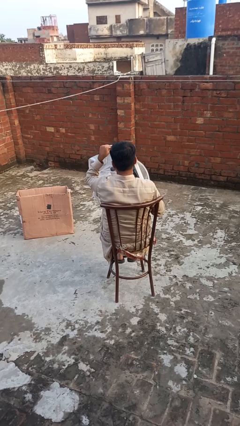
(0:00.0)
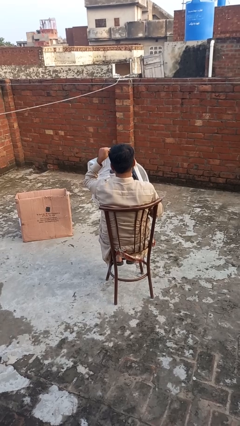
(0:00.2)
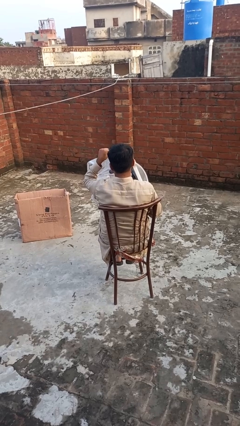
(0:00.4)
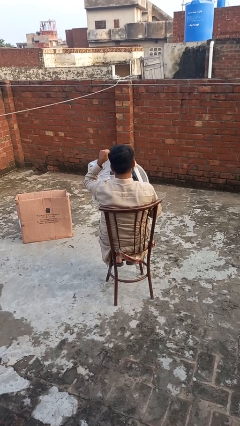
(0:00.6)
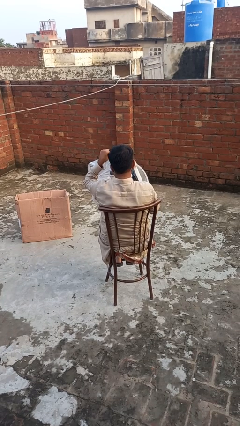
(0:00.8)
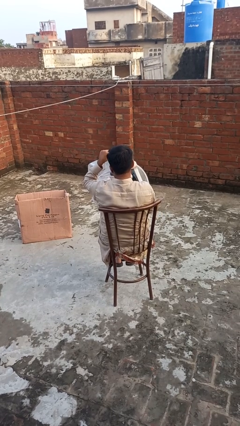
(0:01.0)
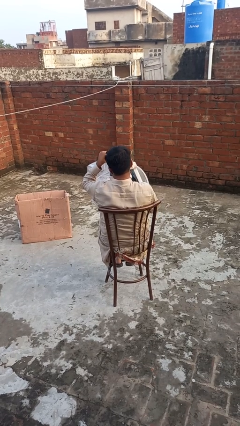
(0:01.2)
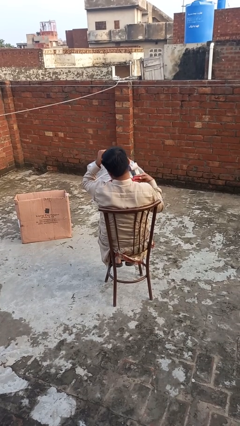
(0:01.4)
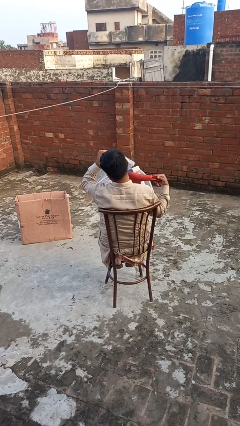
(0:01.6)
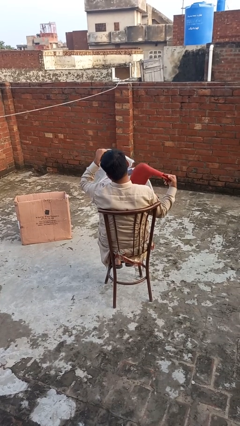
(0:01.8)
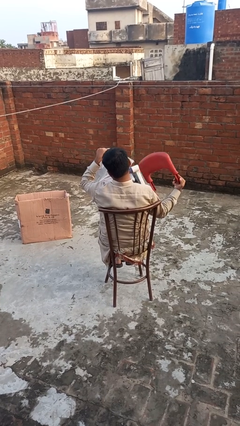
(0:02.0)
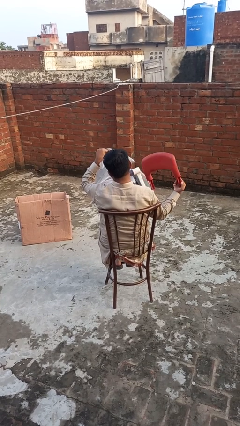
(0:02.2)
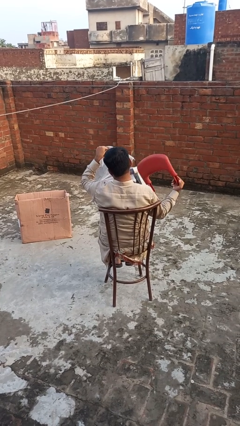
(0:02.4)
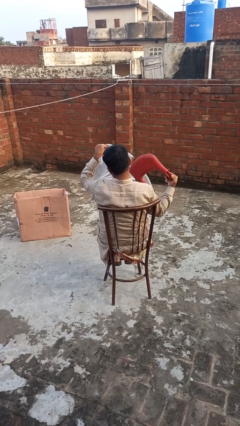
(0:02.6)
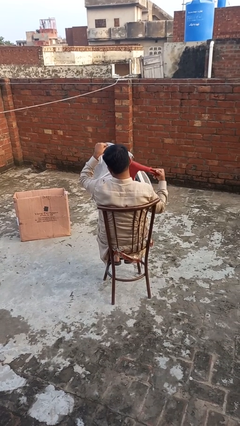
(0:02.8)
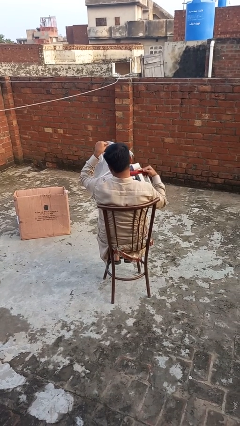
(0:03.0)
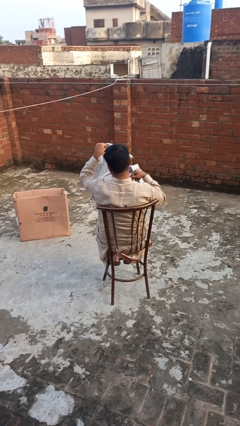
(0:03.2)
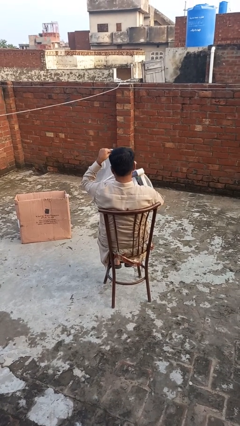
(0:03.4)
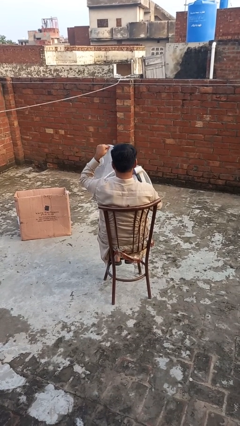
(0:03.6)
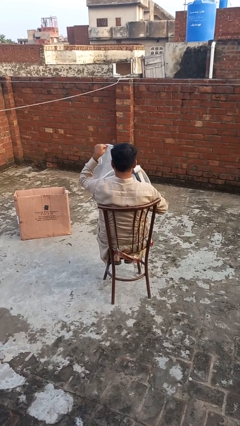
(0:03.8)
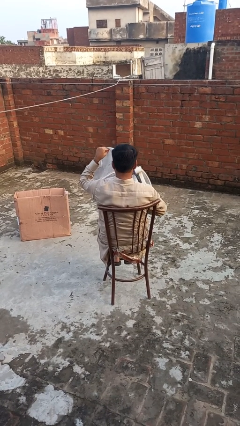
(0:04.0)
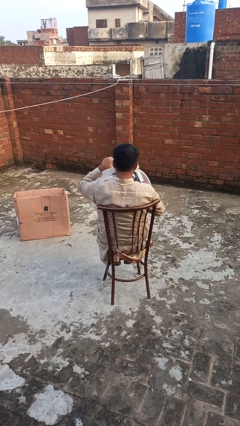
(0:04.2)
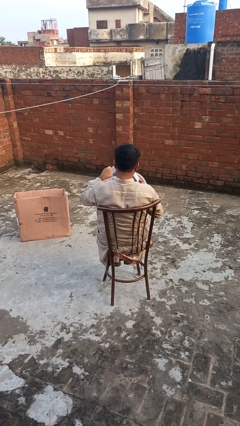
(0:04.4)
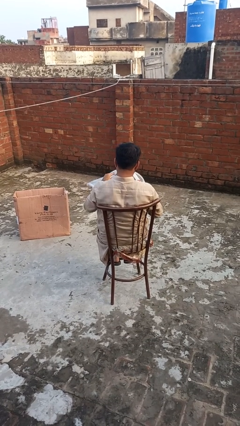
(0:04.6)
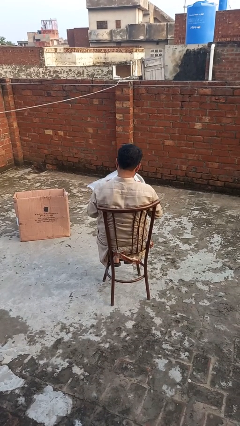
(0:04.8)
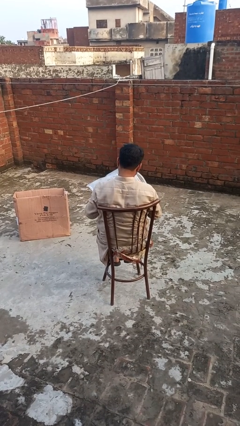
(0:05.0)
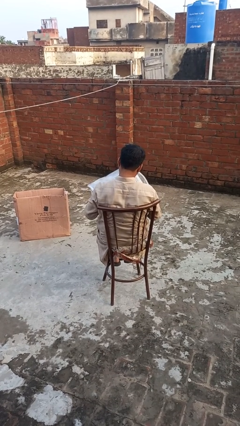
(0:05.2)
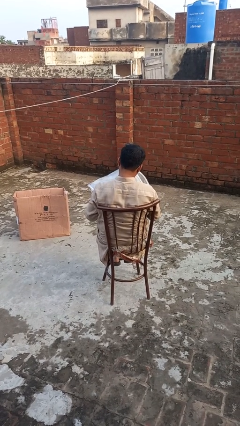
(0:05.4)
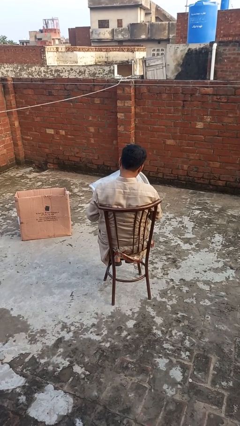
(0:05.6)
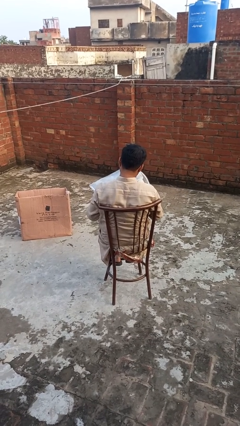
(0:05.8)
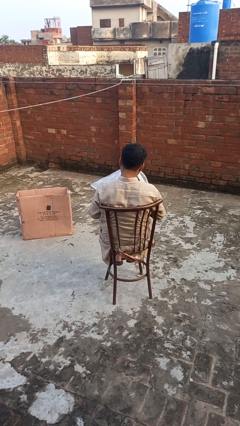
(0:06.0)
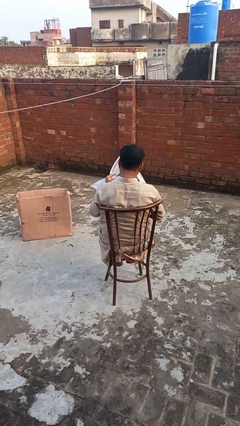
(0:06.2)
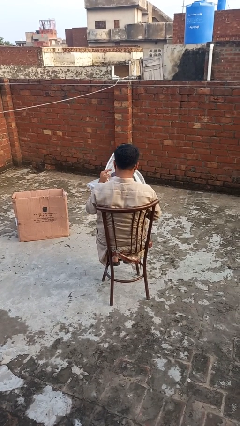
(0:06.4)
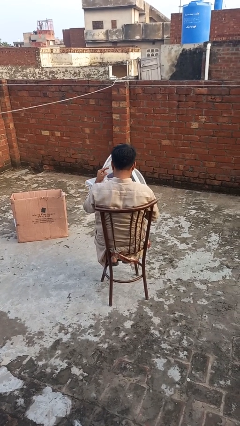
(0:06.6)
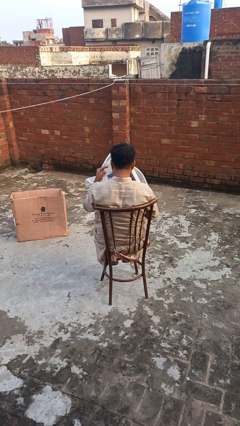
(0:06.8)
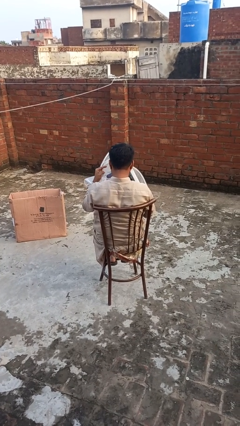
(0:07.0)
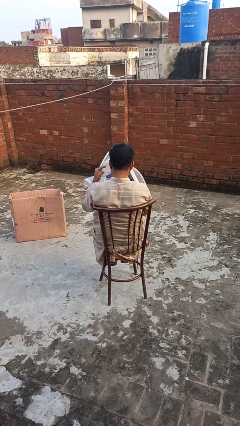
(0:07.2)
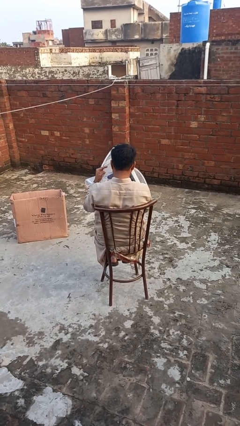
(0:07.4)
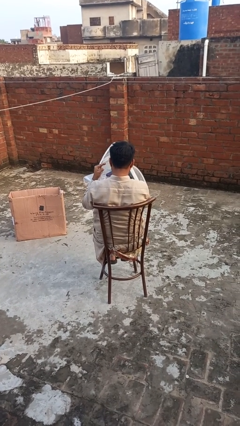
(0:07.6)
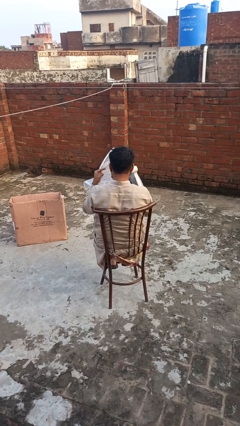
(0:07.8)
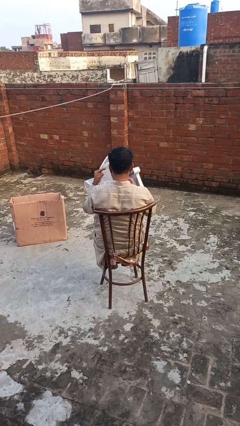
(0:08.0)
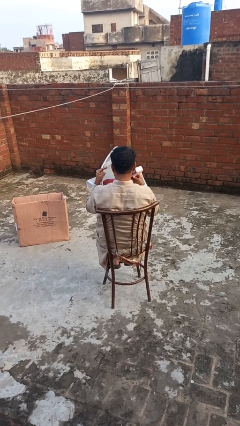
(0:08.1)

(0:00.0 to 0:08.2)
person searches in bag

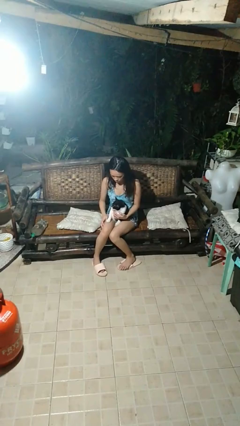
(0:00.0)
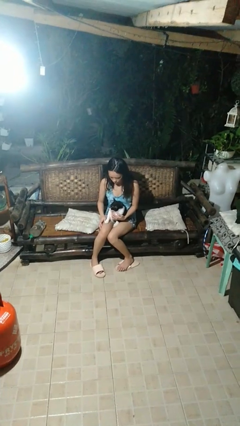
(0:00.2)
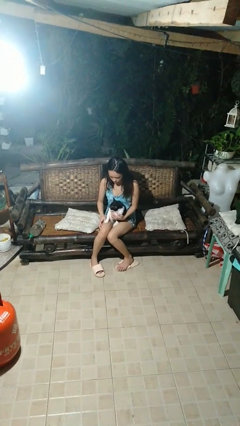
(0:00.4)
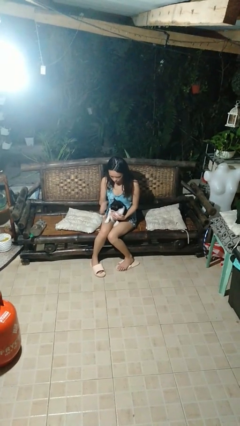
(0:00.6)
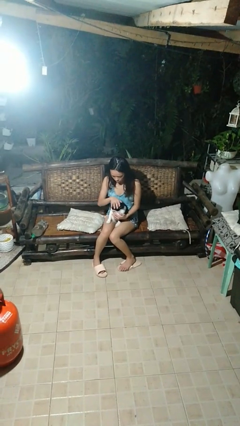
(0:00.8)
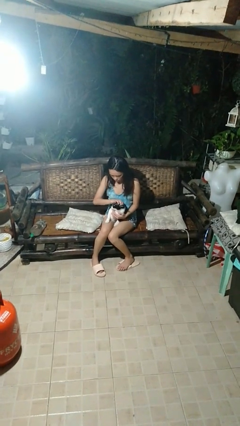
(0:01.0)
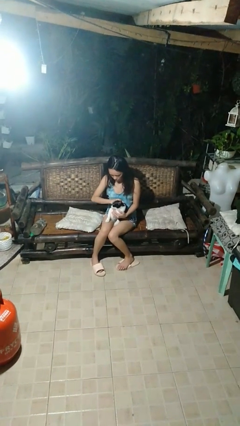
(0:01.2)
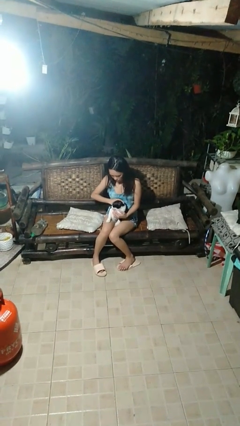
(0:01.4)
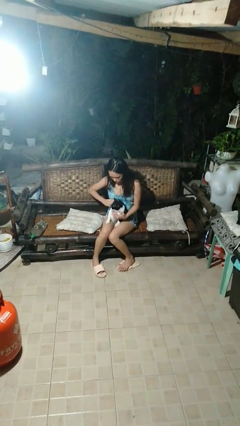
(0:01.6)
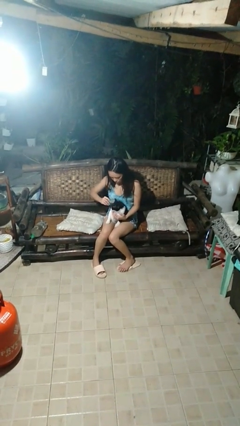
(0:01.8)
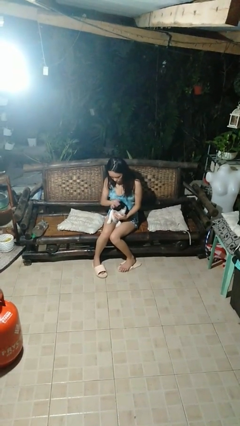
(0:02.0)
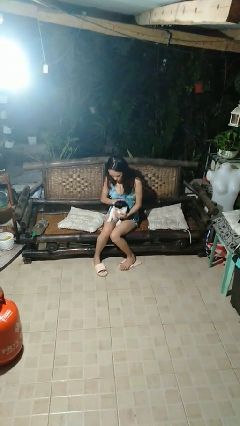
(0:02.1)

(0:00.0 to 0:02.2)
person pets cat

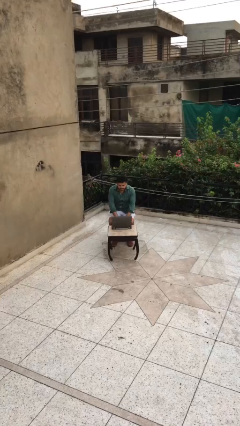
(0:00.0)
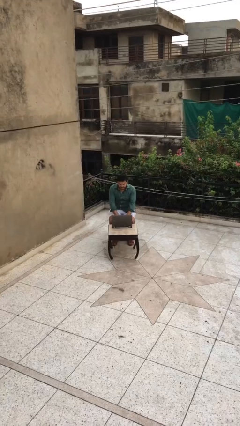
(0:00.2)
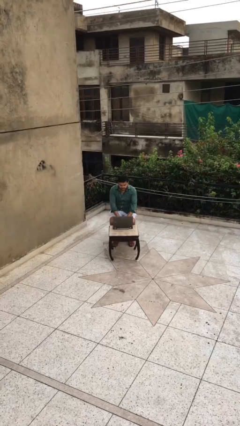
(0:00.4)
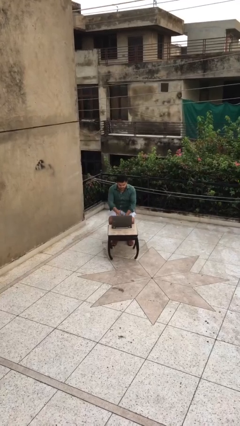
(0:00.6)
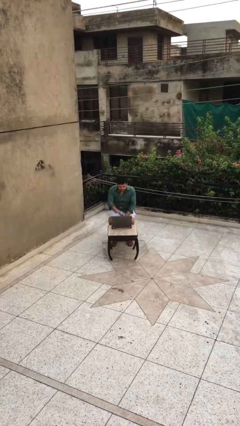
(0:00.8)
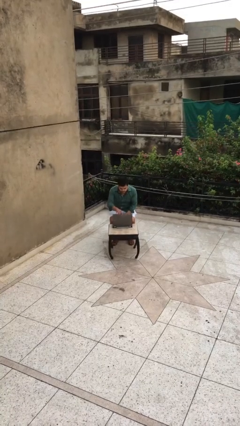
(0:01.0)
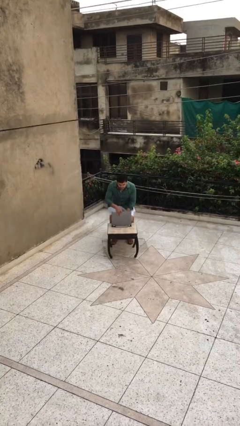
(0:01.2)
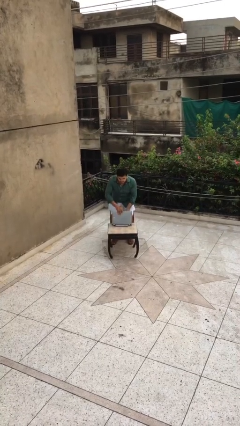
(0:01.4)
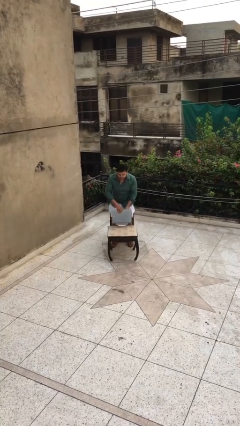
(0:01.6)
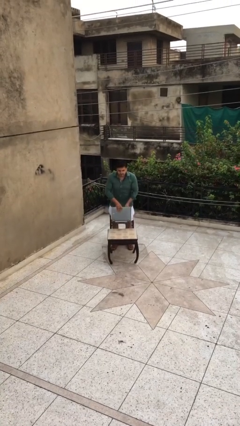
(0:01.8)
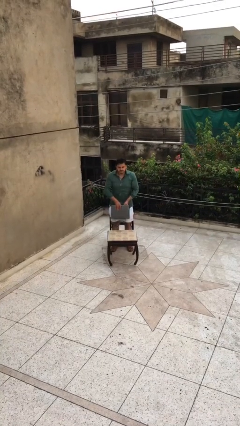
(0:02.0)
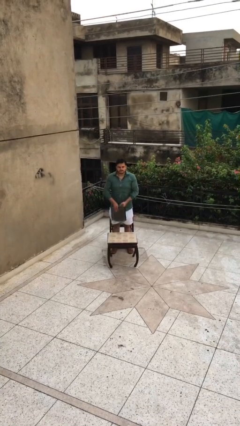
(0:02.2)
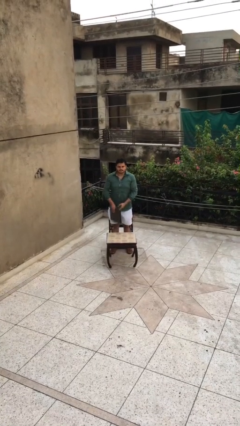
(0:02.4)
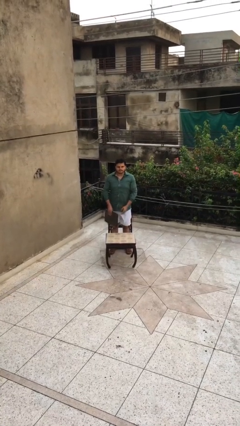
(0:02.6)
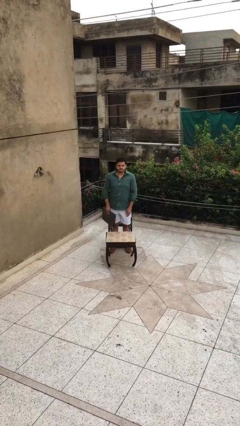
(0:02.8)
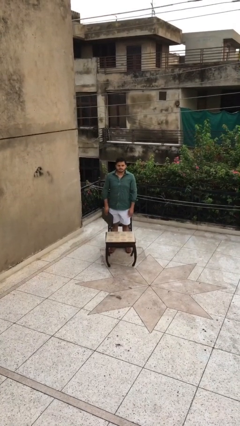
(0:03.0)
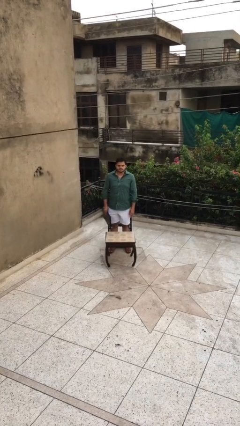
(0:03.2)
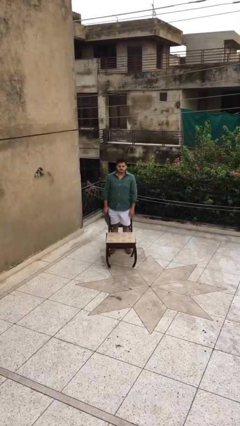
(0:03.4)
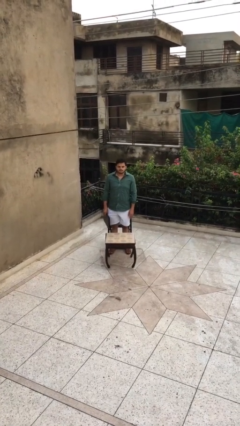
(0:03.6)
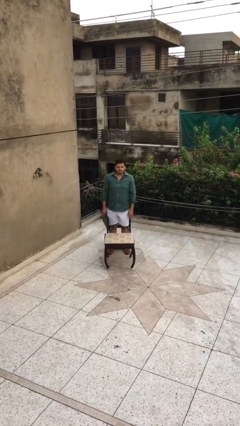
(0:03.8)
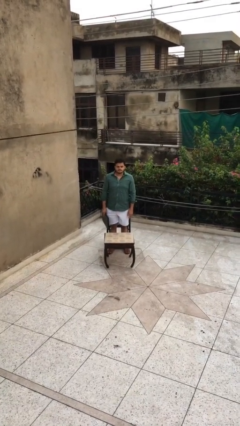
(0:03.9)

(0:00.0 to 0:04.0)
person stands up

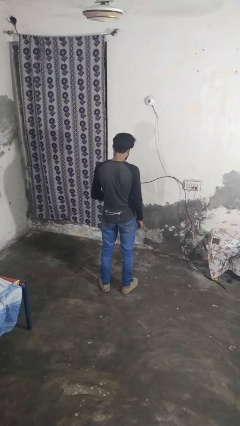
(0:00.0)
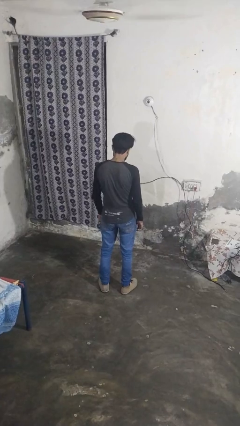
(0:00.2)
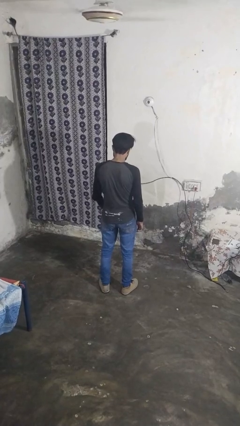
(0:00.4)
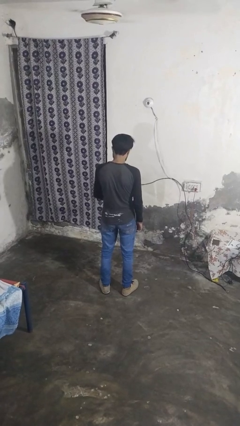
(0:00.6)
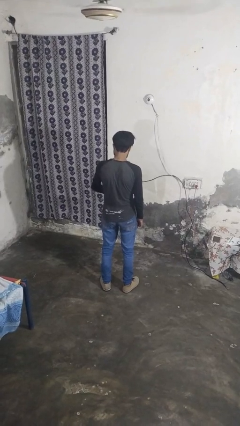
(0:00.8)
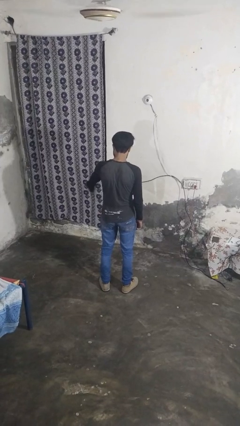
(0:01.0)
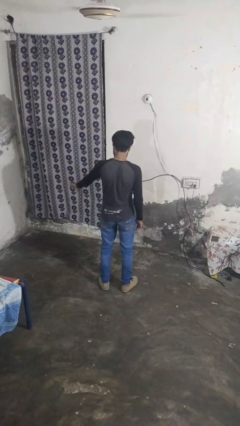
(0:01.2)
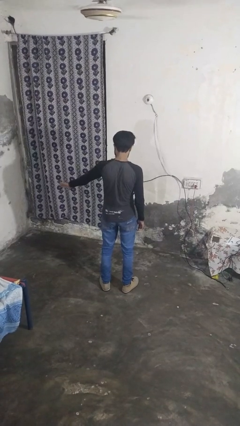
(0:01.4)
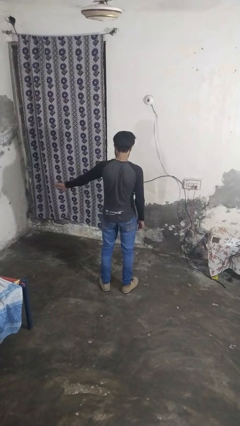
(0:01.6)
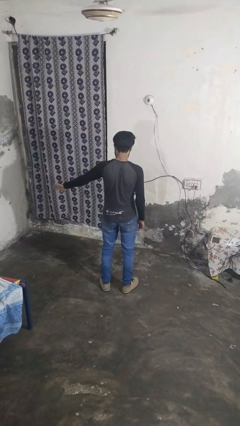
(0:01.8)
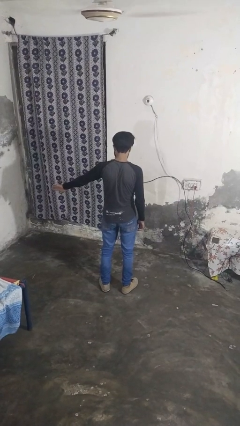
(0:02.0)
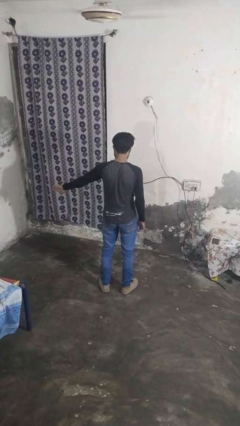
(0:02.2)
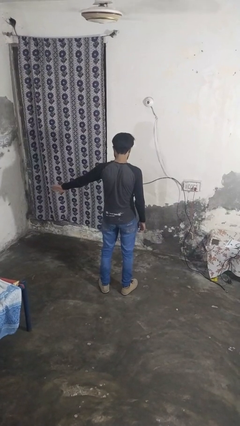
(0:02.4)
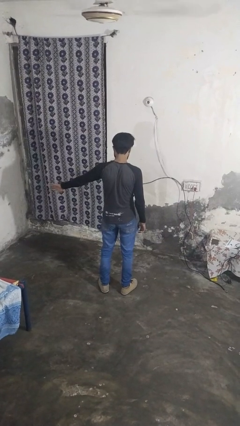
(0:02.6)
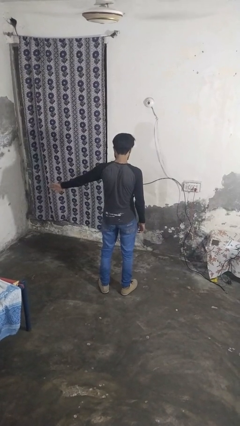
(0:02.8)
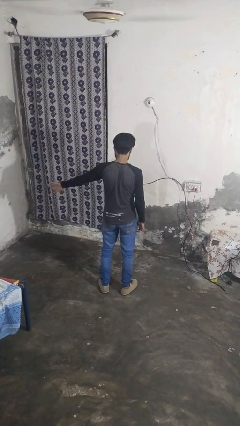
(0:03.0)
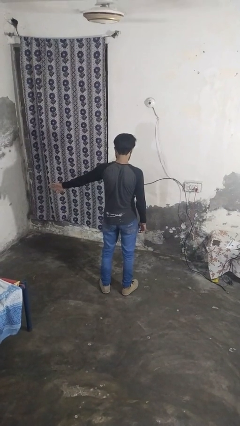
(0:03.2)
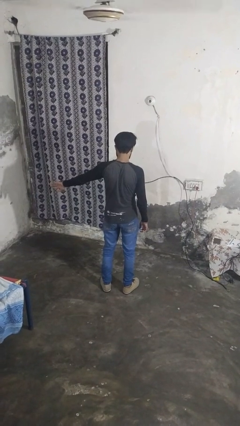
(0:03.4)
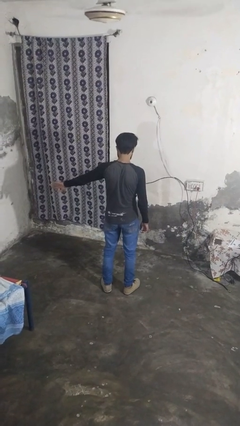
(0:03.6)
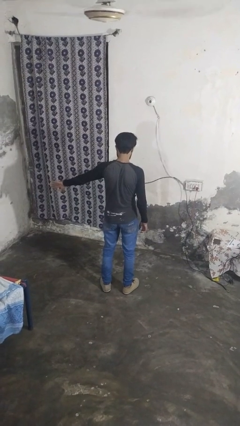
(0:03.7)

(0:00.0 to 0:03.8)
person gestures swipe left
